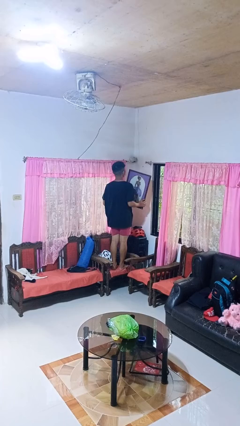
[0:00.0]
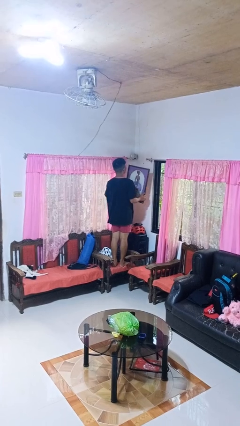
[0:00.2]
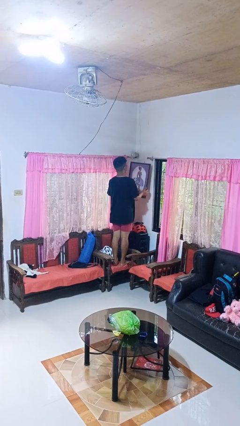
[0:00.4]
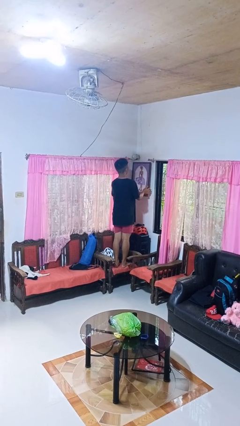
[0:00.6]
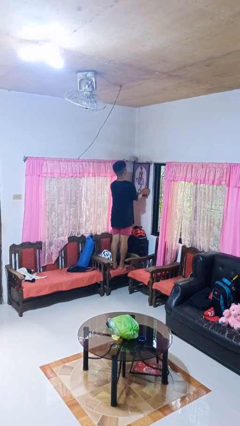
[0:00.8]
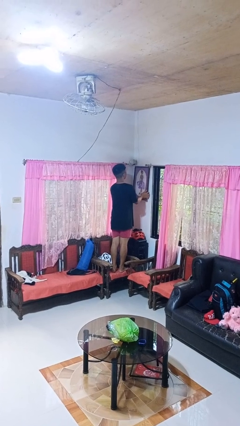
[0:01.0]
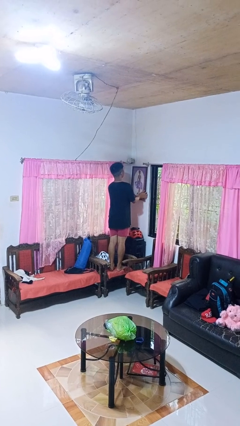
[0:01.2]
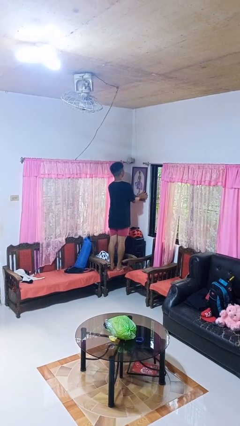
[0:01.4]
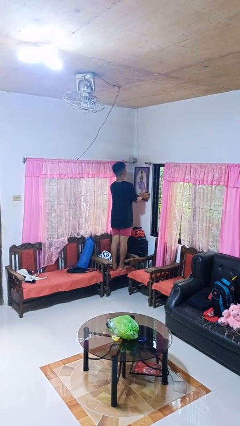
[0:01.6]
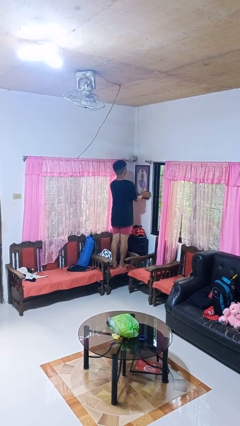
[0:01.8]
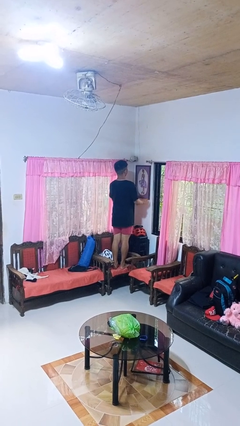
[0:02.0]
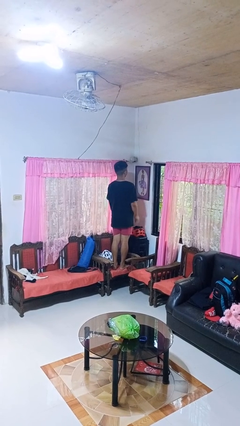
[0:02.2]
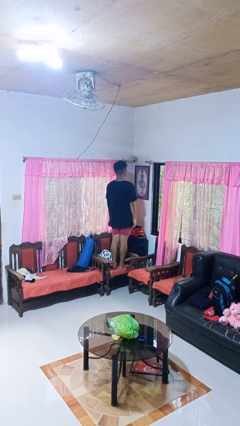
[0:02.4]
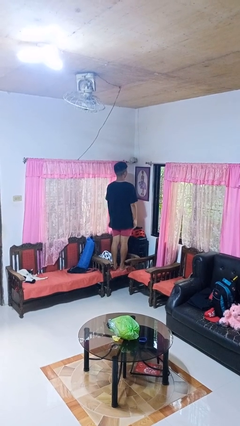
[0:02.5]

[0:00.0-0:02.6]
person puts up picture frame

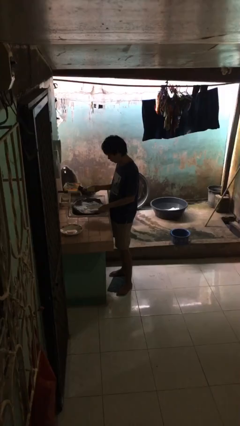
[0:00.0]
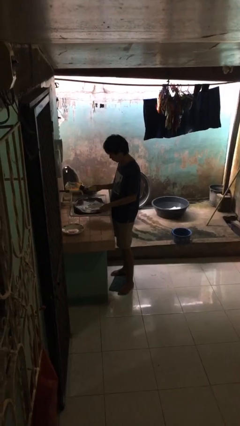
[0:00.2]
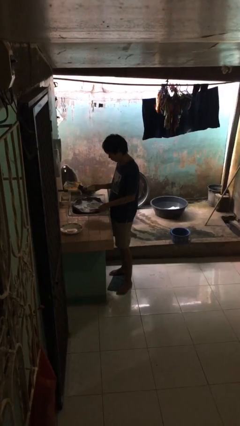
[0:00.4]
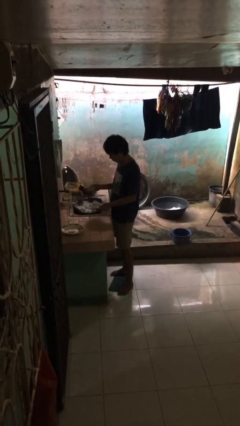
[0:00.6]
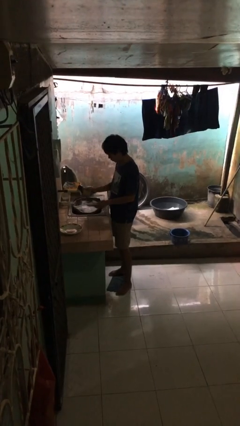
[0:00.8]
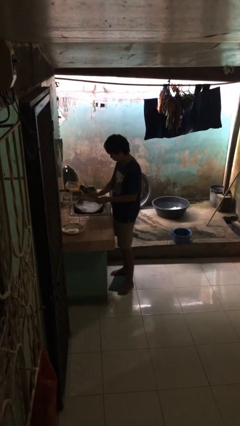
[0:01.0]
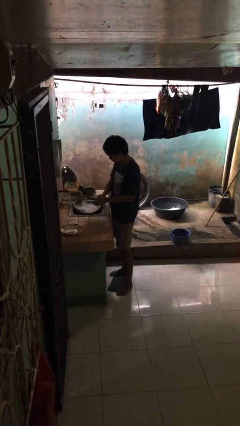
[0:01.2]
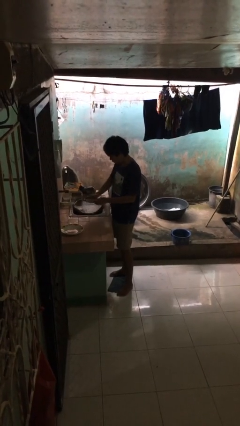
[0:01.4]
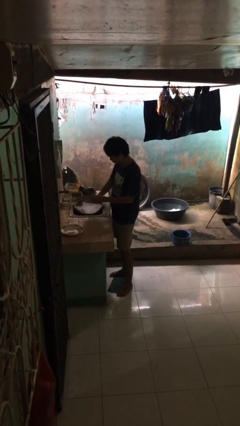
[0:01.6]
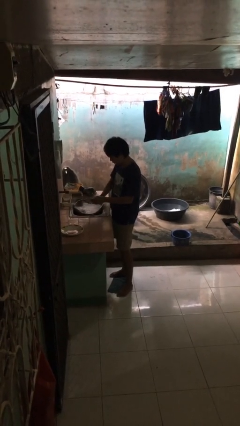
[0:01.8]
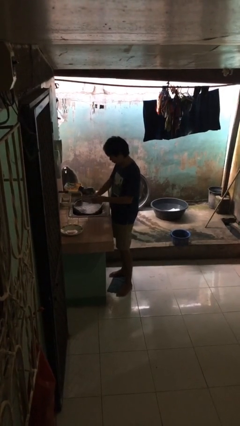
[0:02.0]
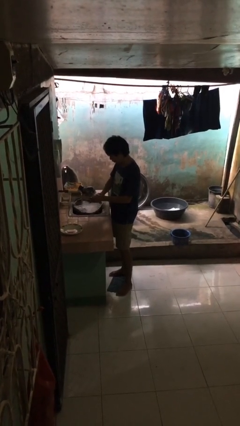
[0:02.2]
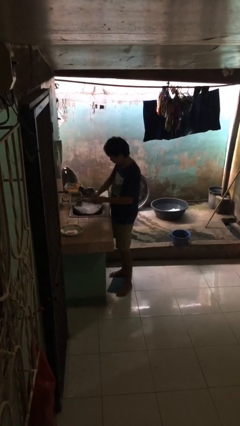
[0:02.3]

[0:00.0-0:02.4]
person washes dish

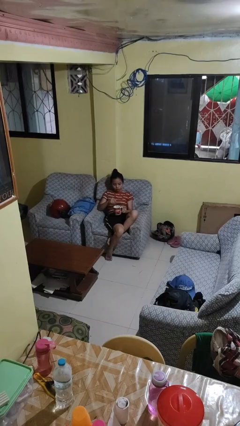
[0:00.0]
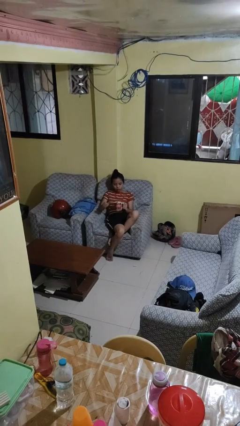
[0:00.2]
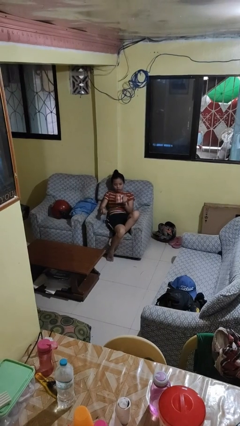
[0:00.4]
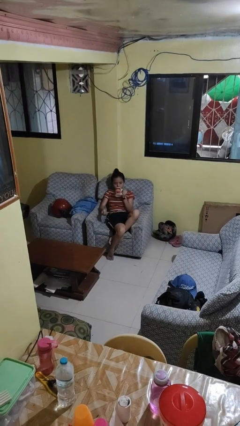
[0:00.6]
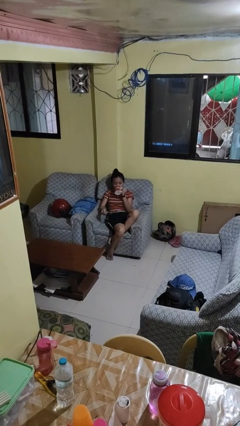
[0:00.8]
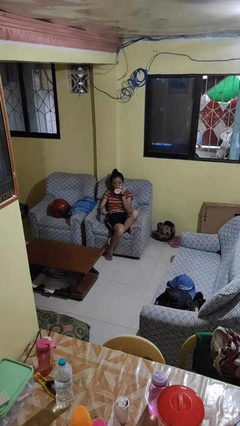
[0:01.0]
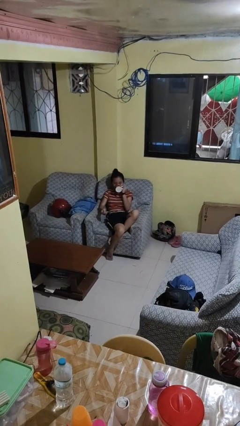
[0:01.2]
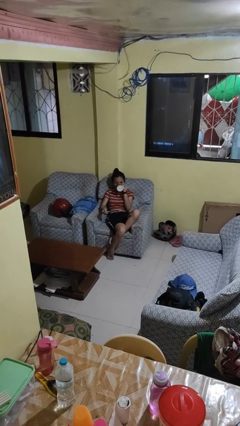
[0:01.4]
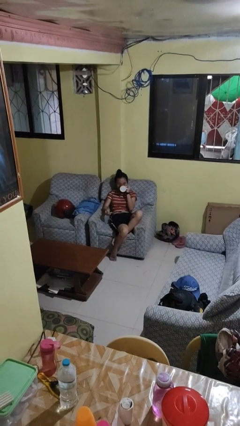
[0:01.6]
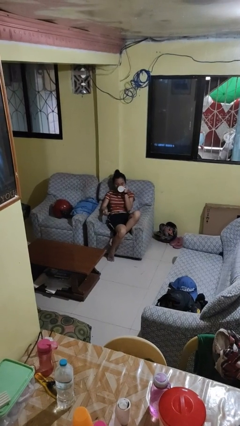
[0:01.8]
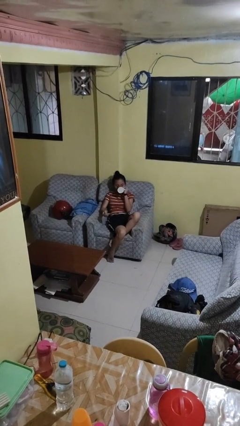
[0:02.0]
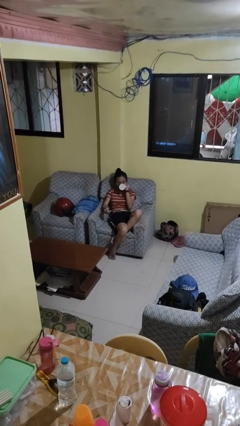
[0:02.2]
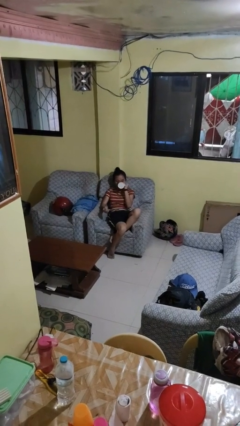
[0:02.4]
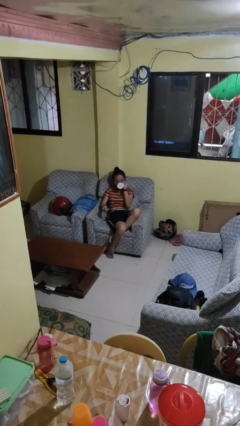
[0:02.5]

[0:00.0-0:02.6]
person drinks from mug

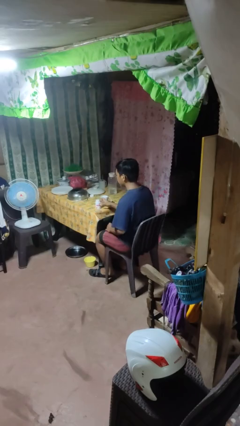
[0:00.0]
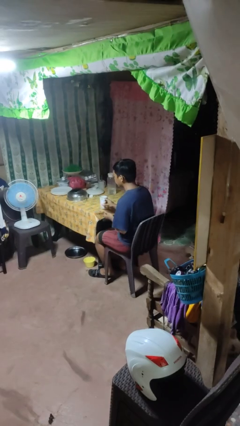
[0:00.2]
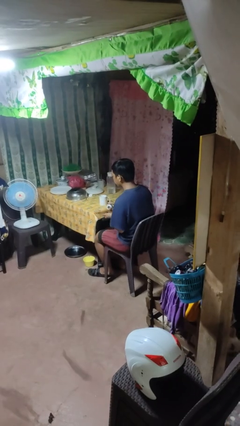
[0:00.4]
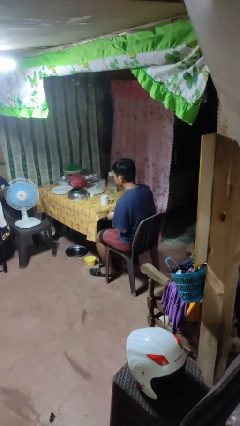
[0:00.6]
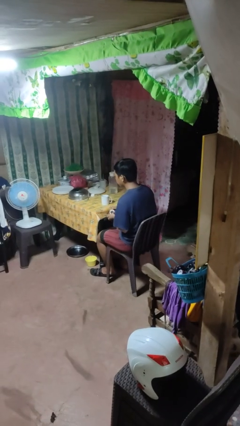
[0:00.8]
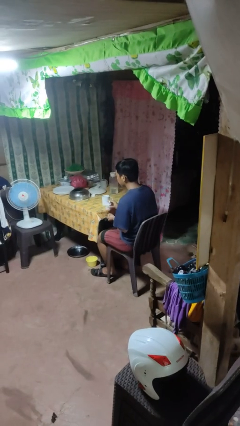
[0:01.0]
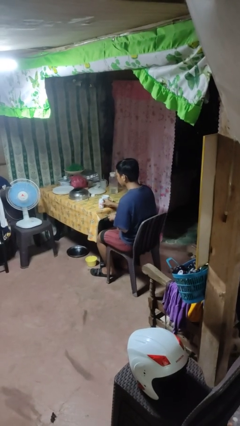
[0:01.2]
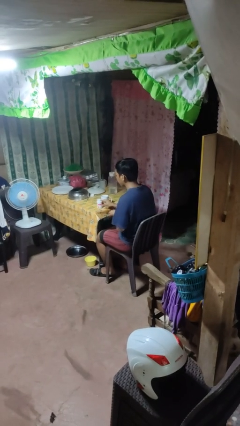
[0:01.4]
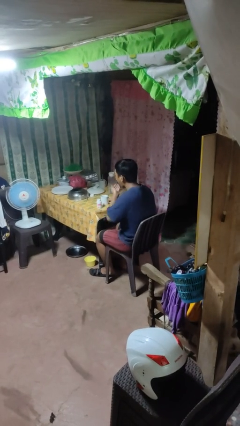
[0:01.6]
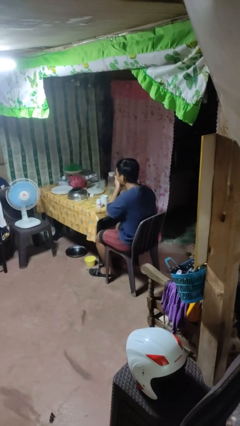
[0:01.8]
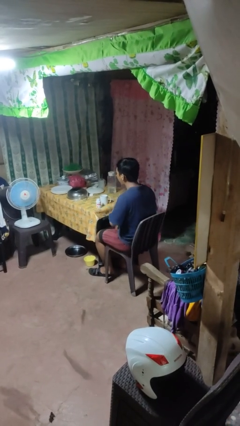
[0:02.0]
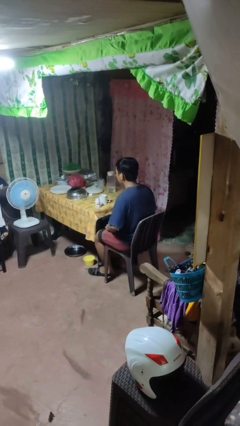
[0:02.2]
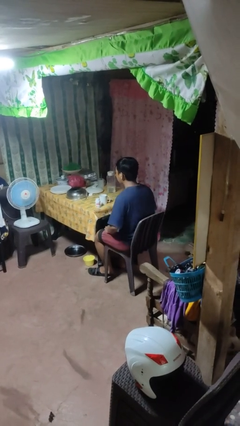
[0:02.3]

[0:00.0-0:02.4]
person takes medicine pills

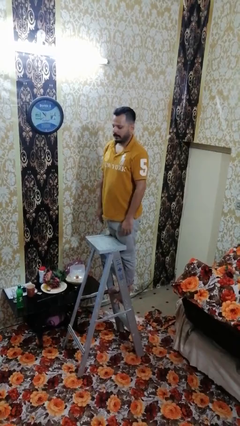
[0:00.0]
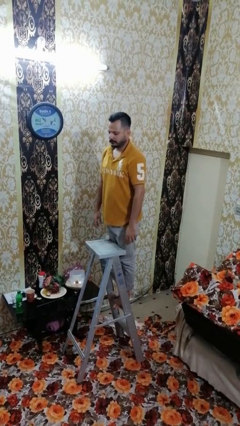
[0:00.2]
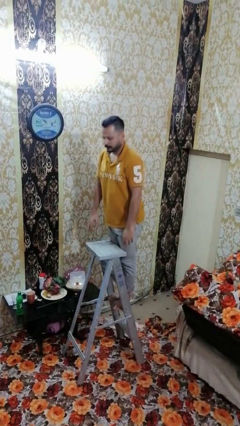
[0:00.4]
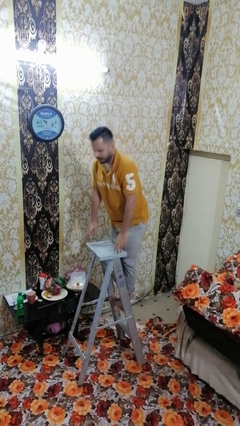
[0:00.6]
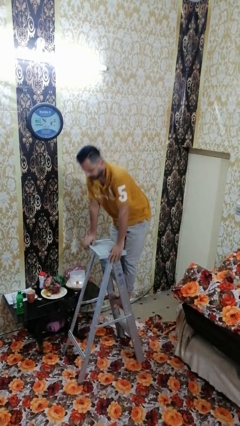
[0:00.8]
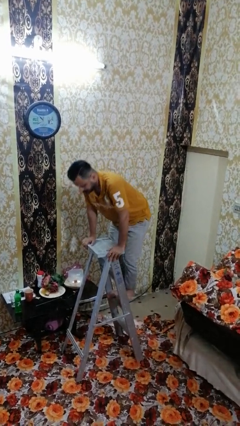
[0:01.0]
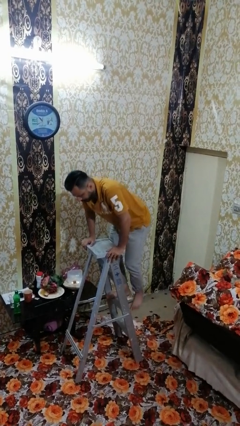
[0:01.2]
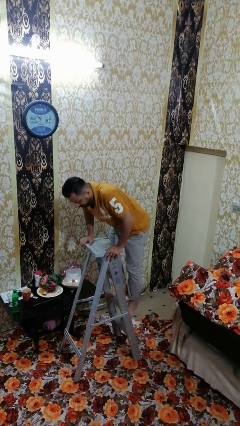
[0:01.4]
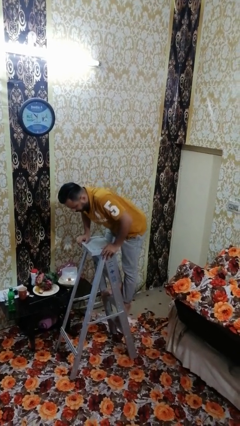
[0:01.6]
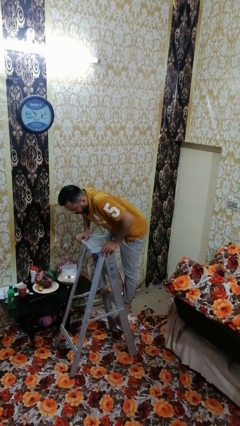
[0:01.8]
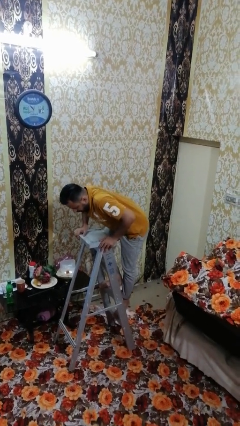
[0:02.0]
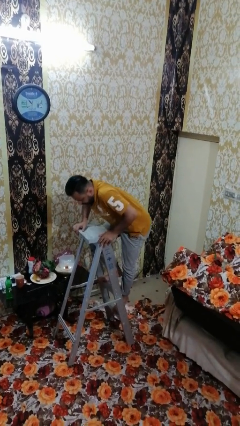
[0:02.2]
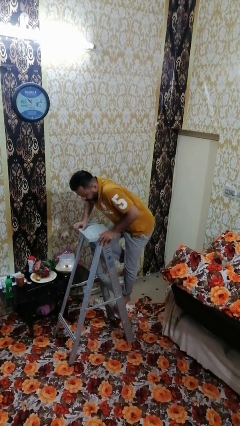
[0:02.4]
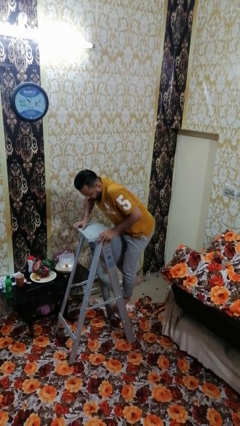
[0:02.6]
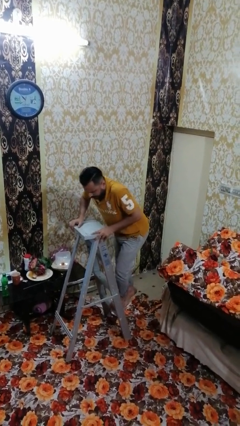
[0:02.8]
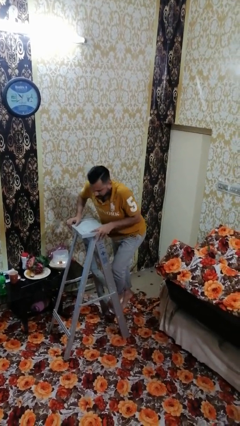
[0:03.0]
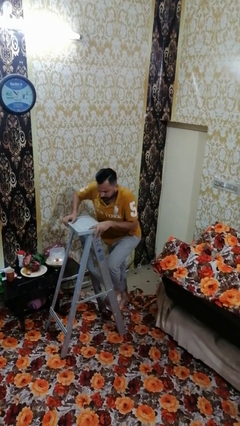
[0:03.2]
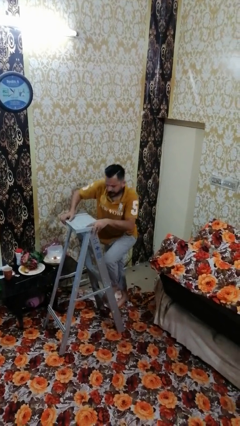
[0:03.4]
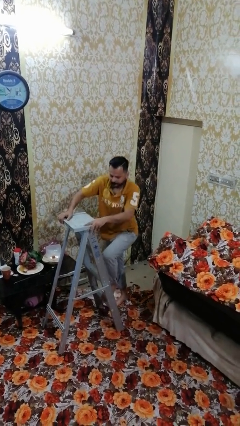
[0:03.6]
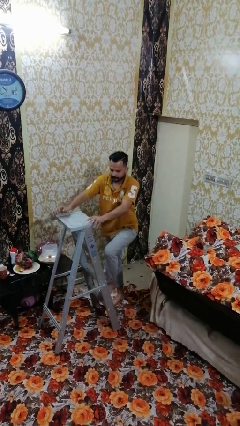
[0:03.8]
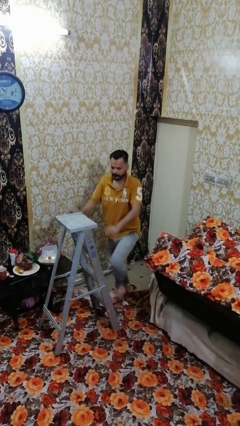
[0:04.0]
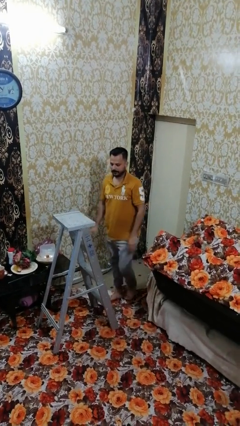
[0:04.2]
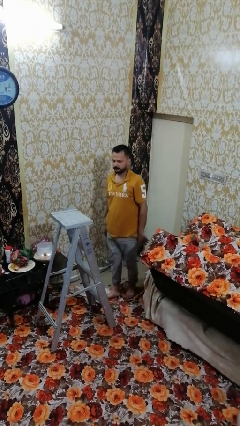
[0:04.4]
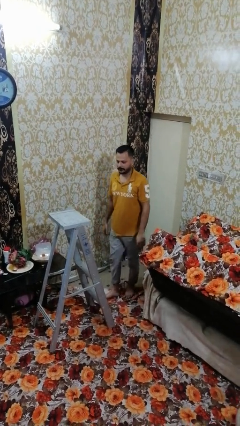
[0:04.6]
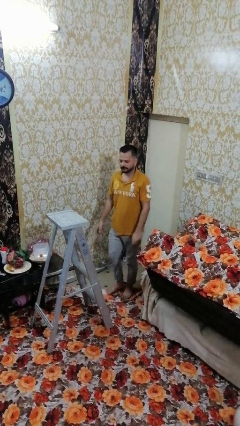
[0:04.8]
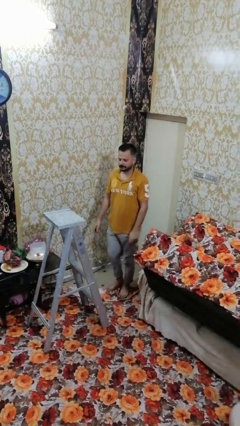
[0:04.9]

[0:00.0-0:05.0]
person climbs down ladder

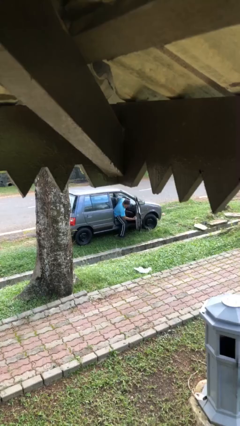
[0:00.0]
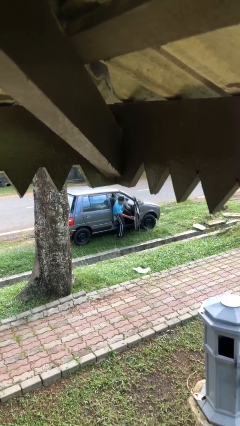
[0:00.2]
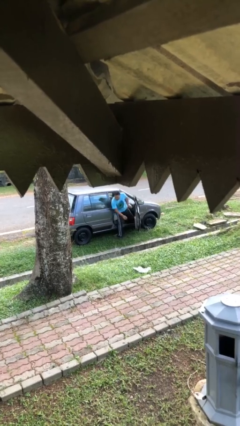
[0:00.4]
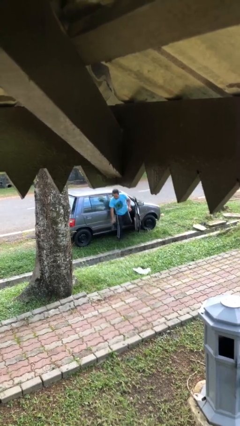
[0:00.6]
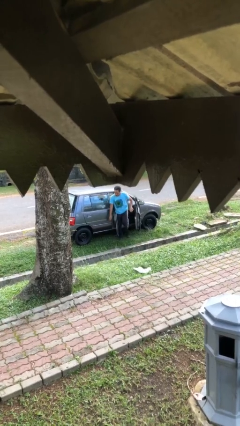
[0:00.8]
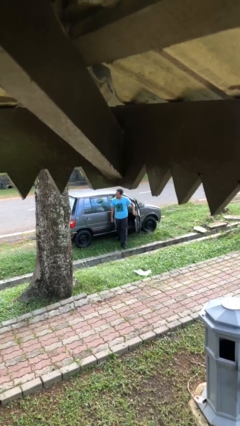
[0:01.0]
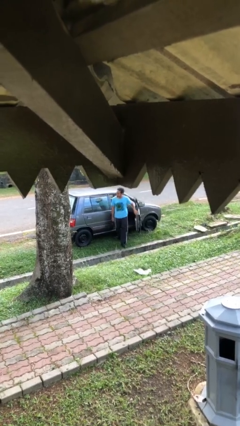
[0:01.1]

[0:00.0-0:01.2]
person exits car

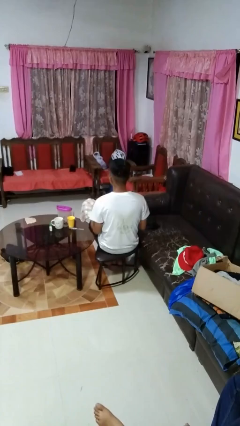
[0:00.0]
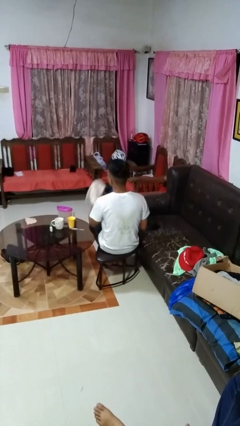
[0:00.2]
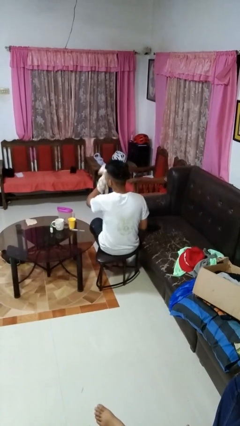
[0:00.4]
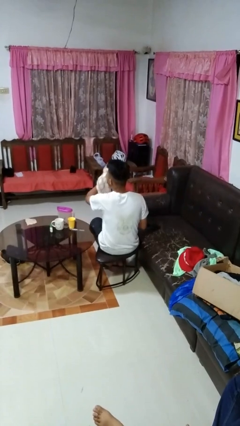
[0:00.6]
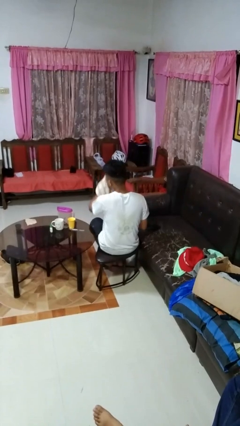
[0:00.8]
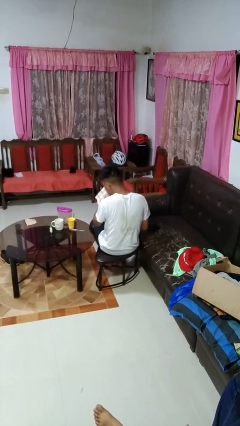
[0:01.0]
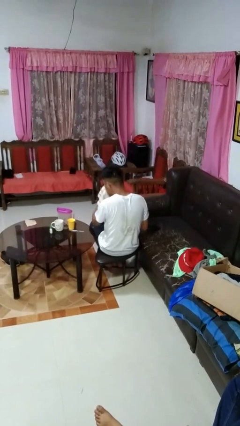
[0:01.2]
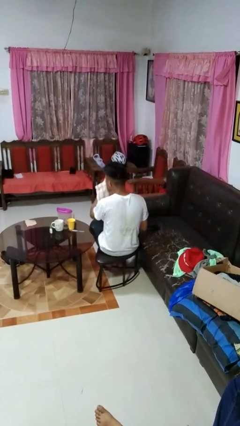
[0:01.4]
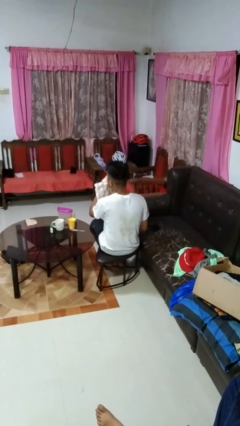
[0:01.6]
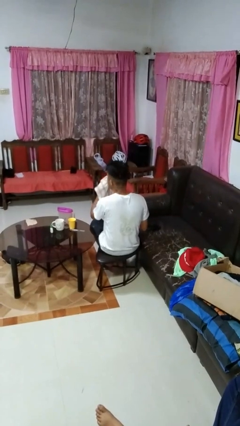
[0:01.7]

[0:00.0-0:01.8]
person blows nose
